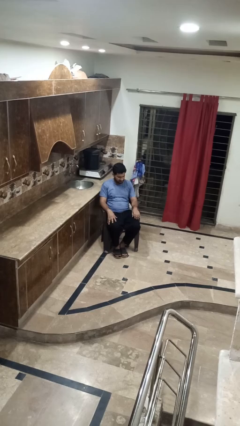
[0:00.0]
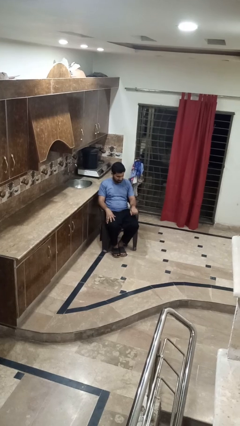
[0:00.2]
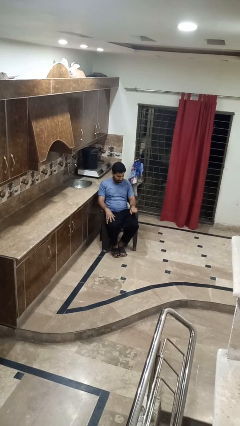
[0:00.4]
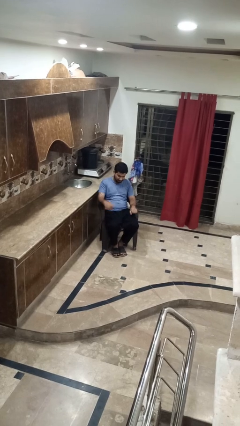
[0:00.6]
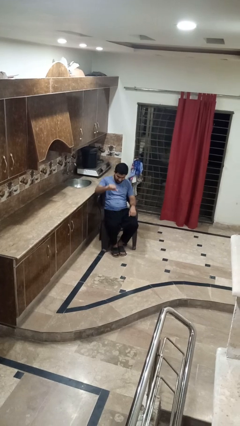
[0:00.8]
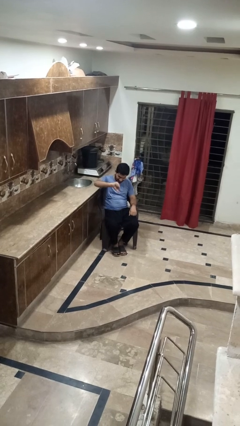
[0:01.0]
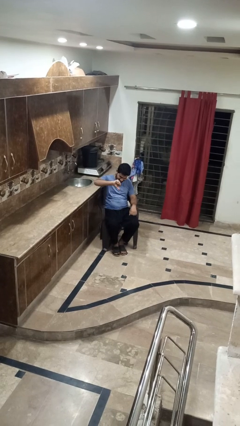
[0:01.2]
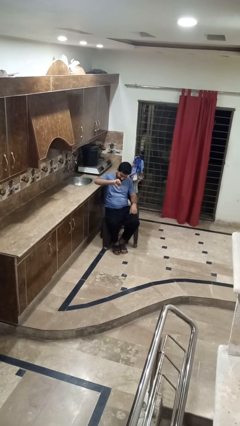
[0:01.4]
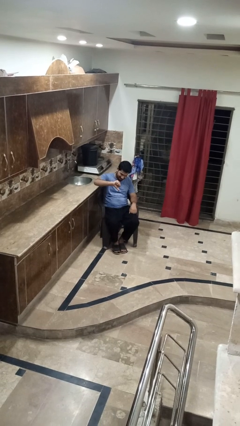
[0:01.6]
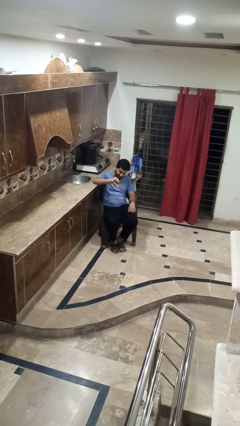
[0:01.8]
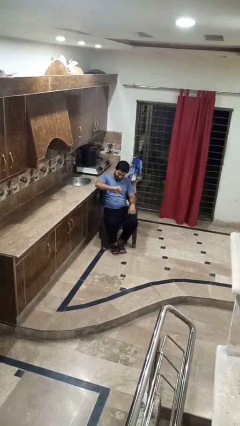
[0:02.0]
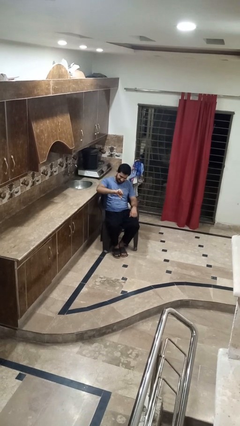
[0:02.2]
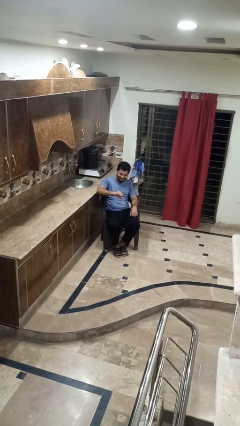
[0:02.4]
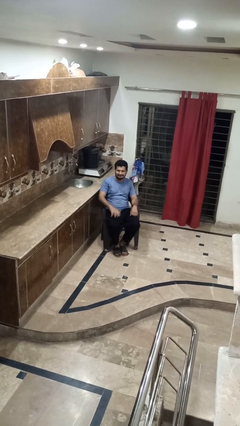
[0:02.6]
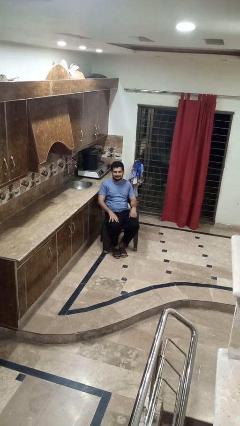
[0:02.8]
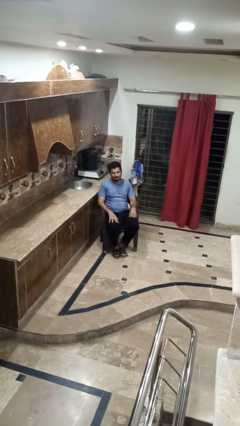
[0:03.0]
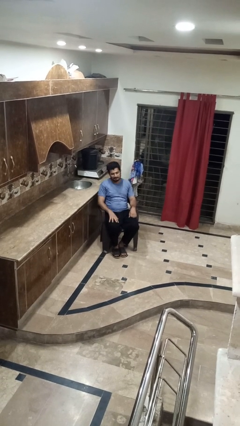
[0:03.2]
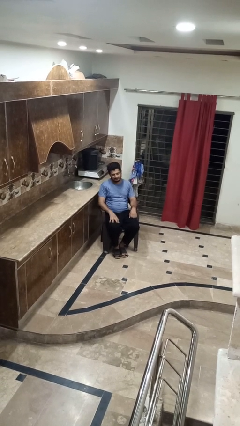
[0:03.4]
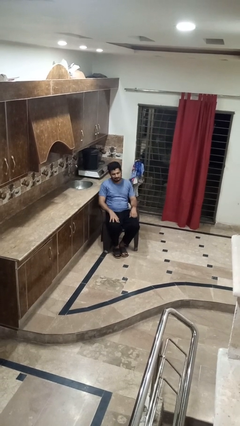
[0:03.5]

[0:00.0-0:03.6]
person gestures thumbs down

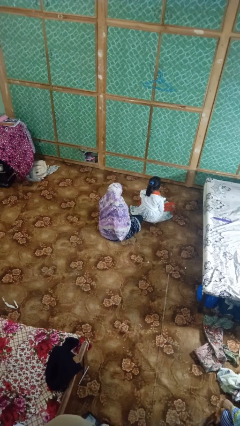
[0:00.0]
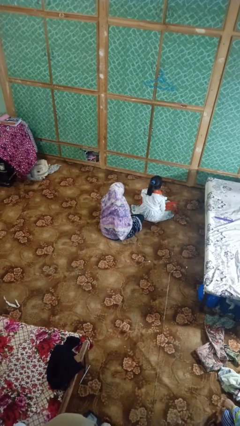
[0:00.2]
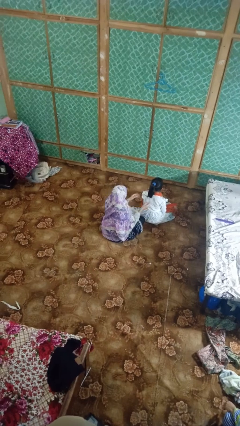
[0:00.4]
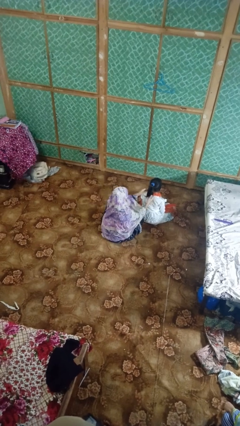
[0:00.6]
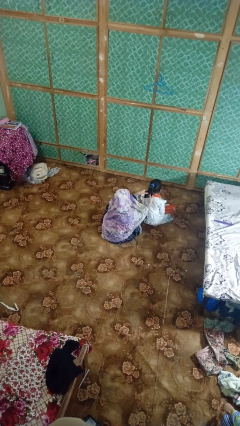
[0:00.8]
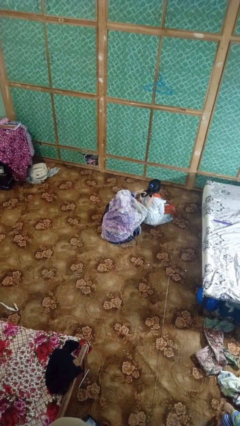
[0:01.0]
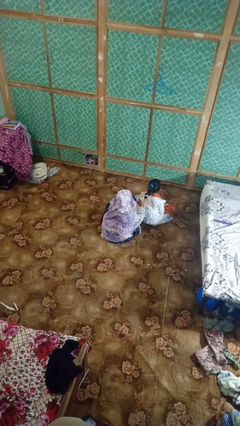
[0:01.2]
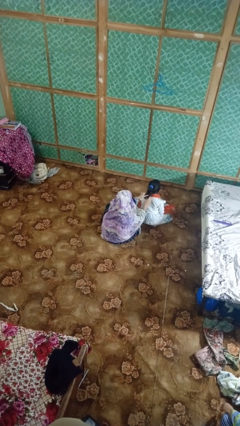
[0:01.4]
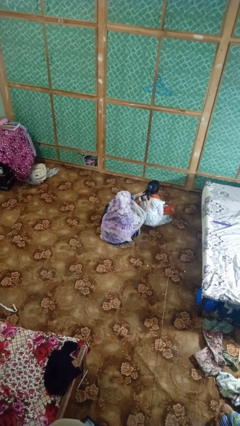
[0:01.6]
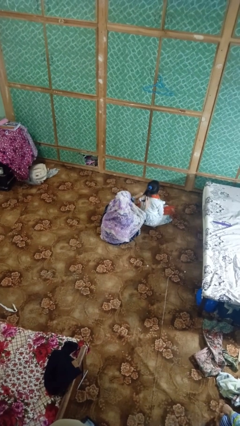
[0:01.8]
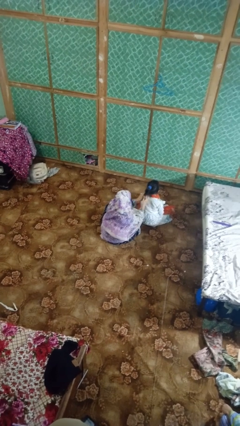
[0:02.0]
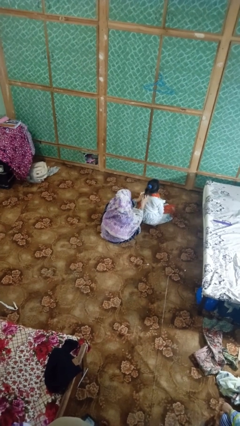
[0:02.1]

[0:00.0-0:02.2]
person braids hair of person

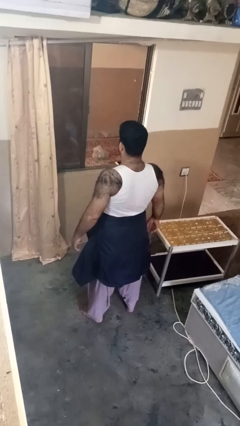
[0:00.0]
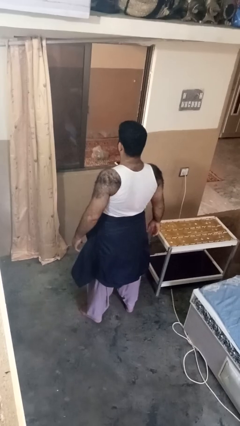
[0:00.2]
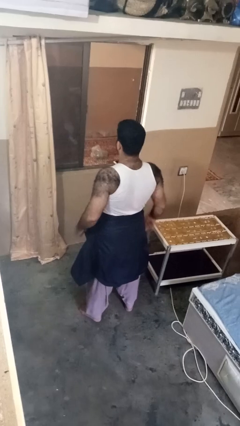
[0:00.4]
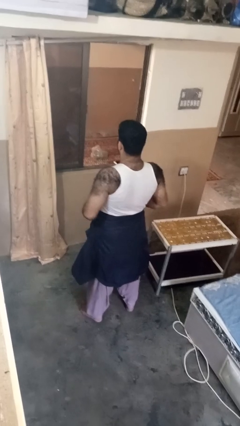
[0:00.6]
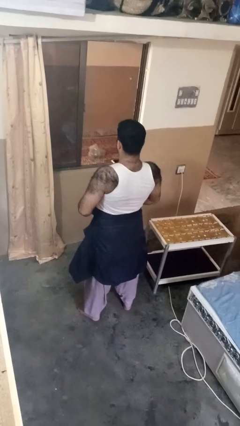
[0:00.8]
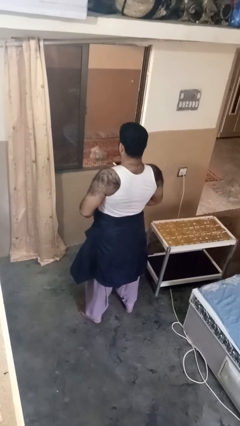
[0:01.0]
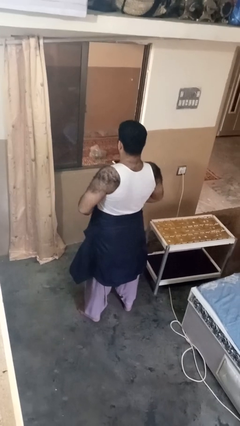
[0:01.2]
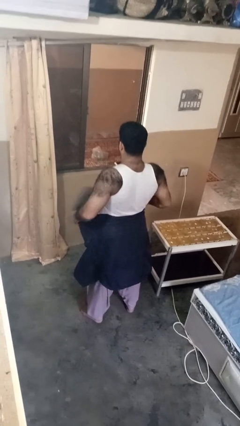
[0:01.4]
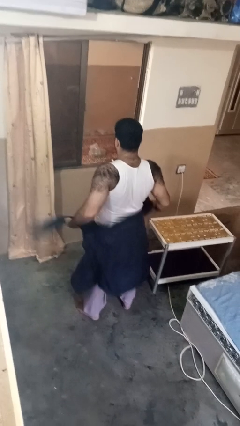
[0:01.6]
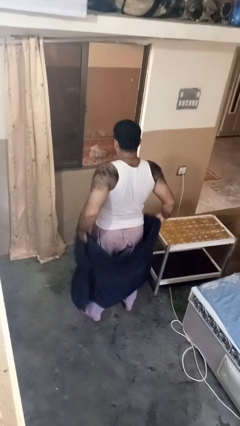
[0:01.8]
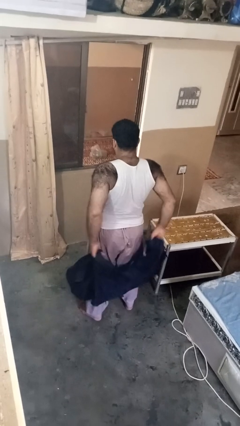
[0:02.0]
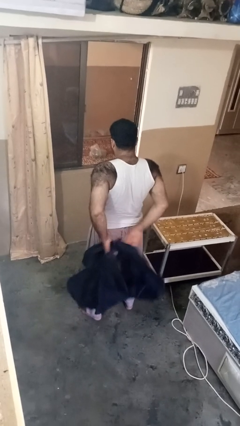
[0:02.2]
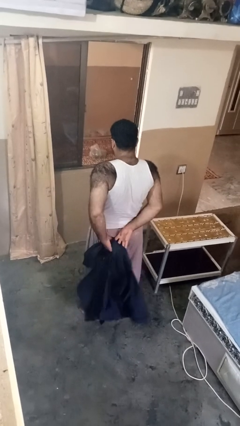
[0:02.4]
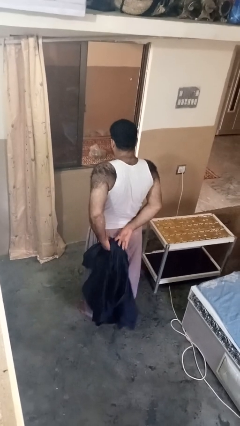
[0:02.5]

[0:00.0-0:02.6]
person unties jacket around waist

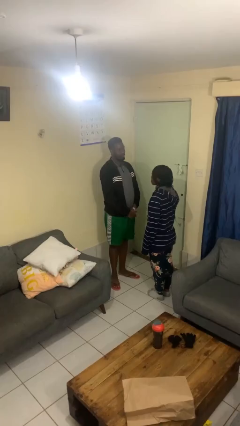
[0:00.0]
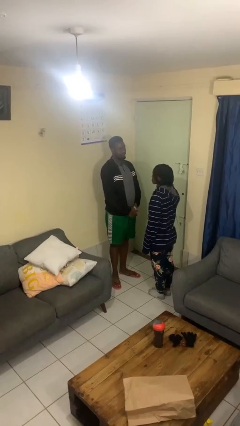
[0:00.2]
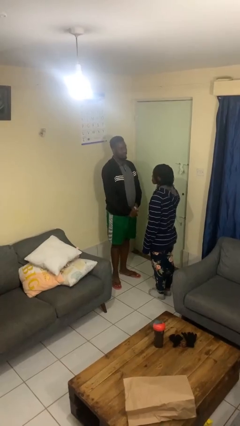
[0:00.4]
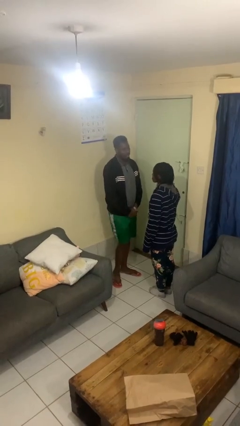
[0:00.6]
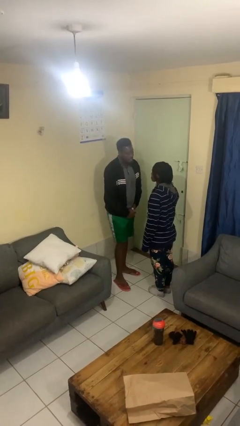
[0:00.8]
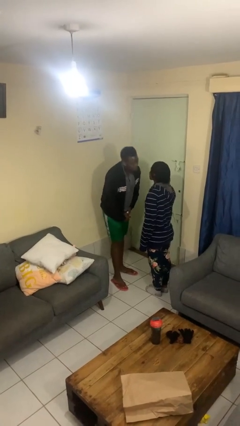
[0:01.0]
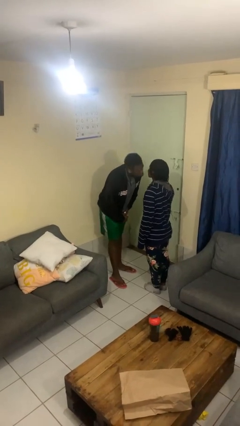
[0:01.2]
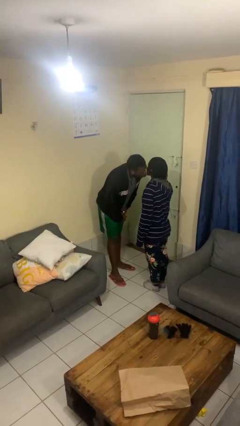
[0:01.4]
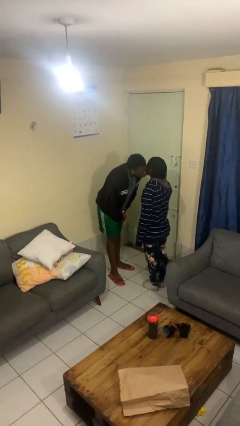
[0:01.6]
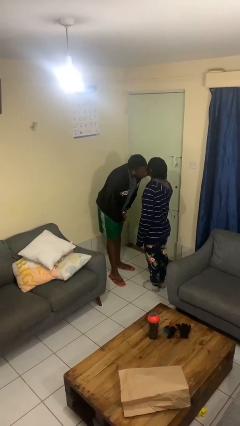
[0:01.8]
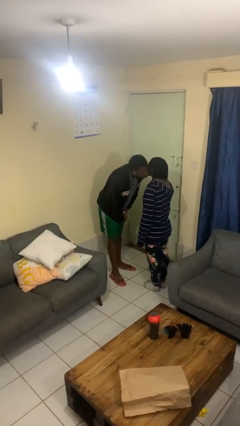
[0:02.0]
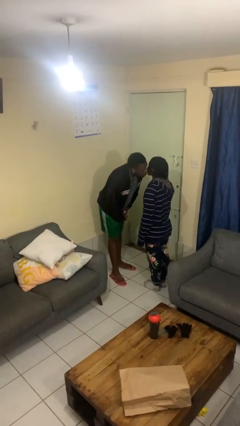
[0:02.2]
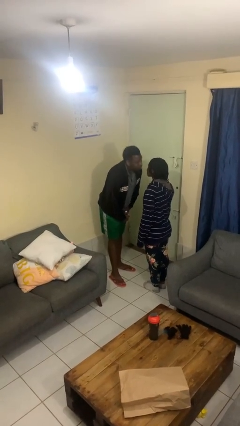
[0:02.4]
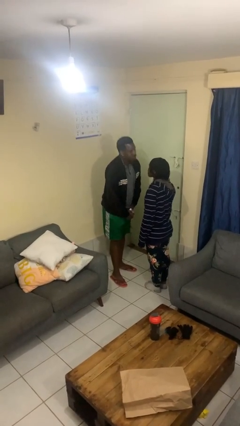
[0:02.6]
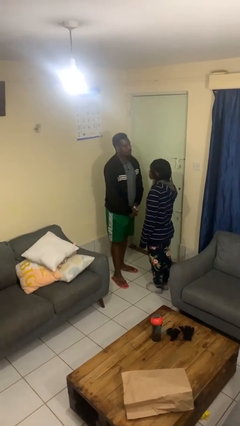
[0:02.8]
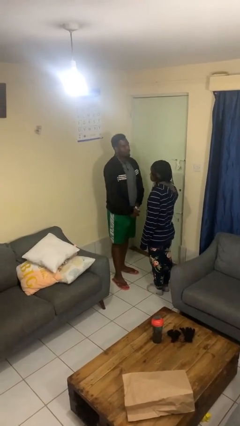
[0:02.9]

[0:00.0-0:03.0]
person kisses cheek of person

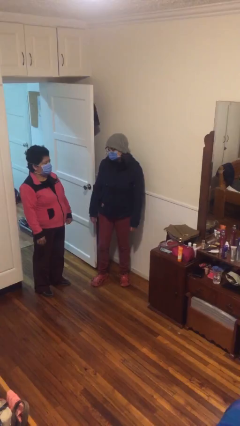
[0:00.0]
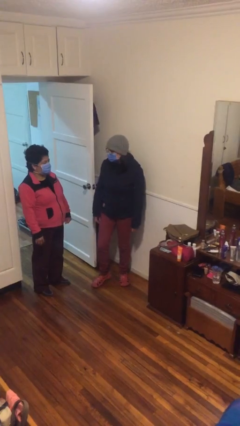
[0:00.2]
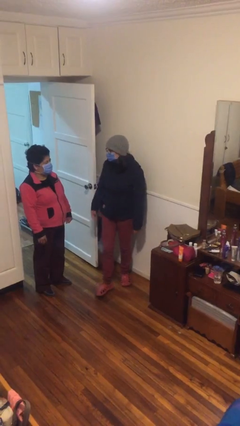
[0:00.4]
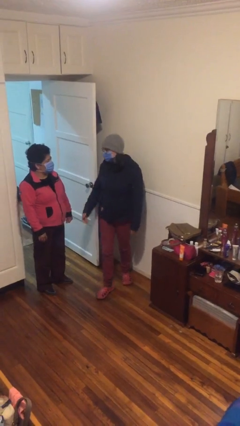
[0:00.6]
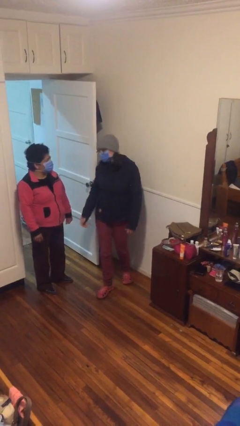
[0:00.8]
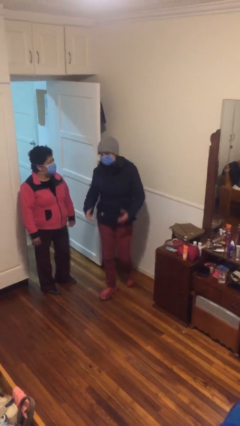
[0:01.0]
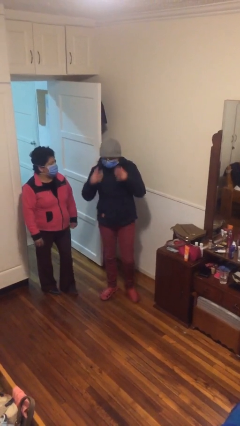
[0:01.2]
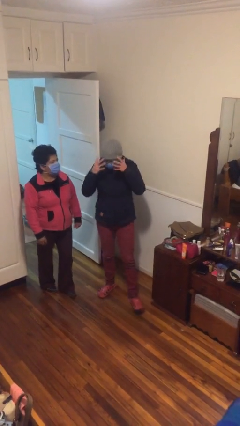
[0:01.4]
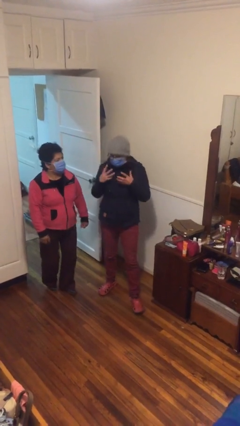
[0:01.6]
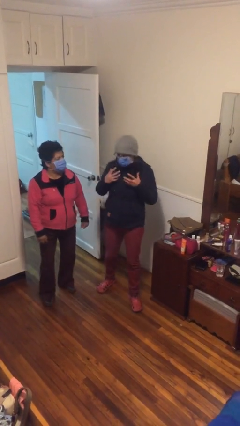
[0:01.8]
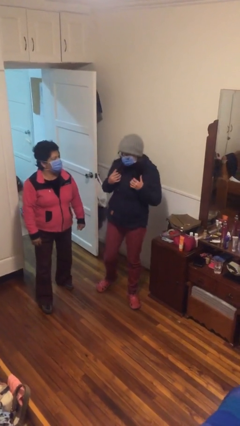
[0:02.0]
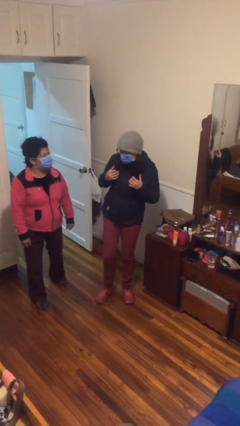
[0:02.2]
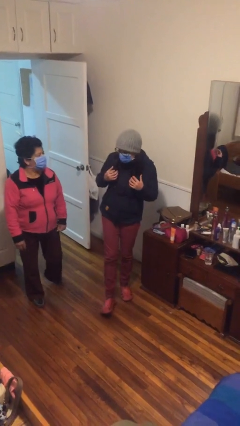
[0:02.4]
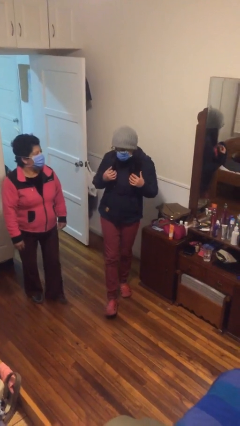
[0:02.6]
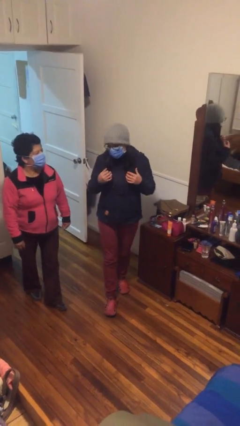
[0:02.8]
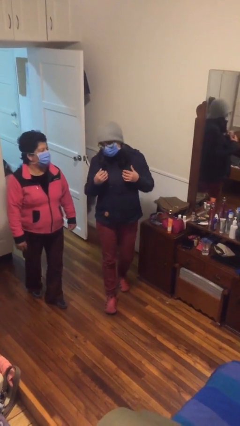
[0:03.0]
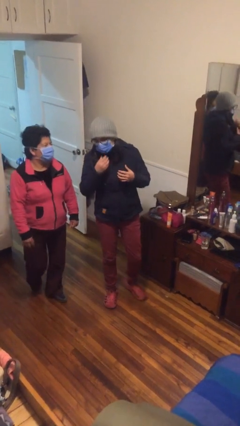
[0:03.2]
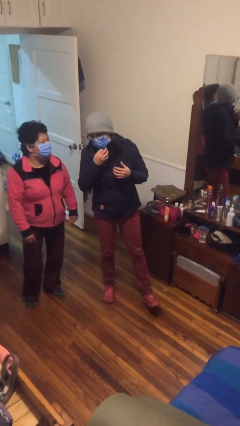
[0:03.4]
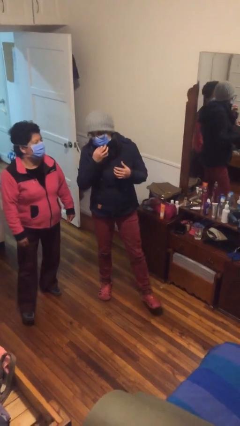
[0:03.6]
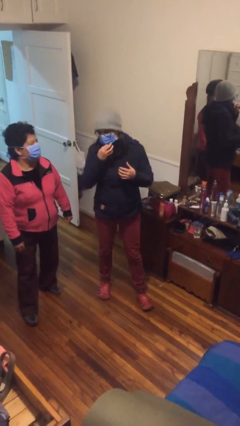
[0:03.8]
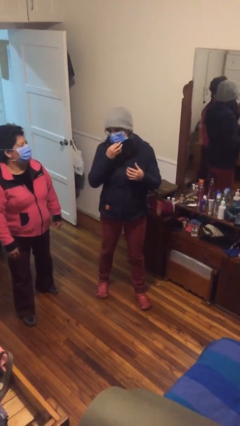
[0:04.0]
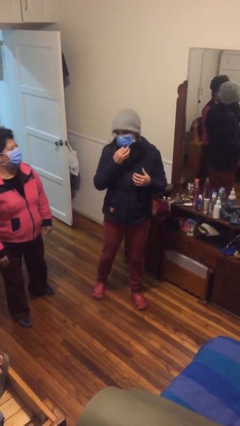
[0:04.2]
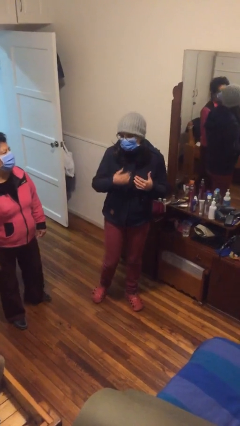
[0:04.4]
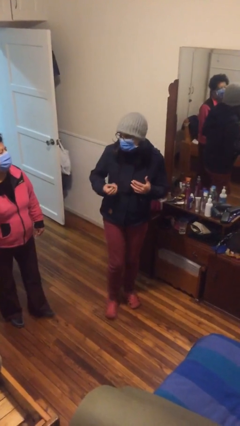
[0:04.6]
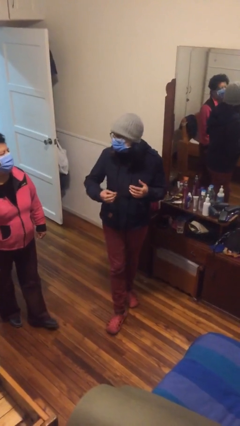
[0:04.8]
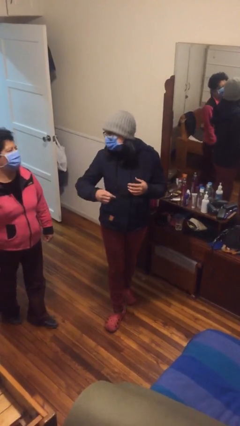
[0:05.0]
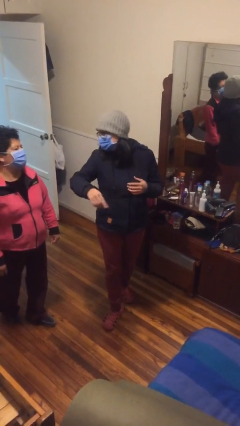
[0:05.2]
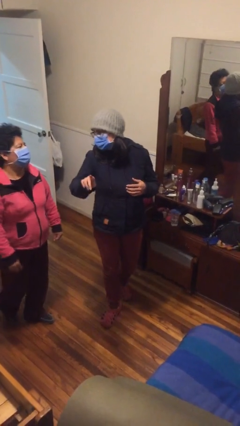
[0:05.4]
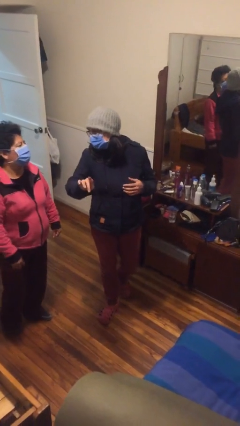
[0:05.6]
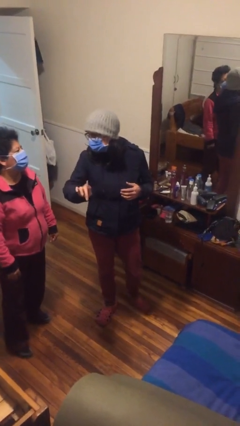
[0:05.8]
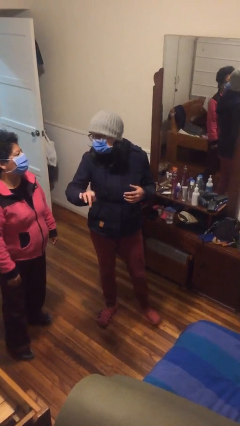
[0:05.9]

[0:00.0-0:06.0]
person talks to person

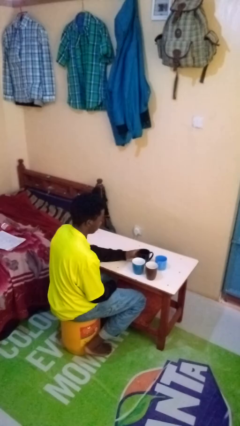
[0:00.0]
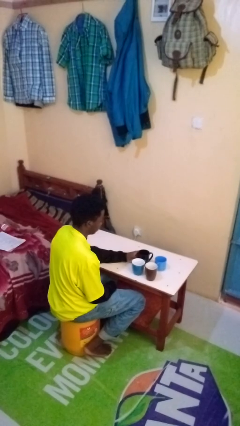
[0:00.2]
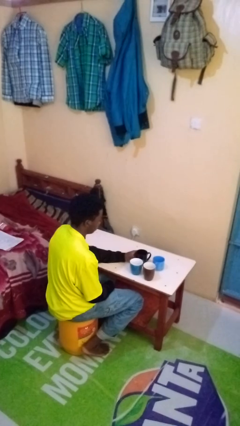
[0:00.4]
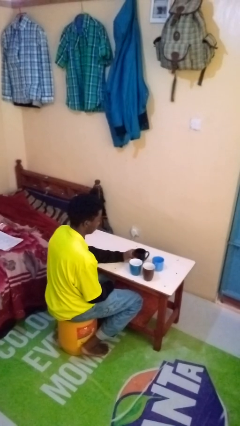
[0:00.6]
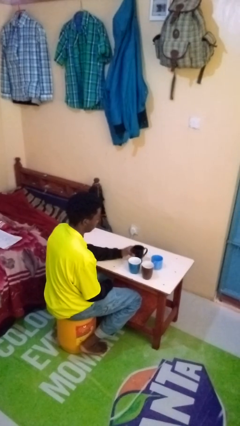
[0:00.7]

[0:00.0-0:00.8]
person picks up object from table
